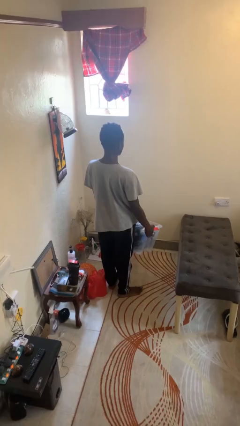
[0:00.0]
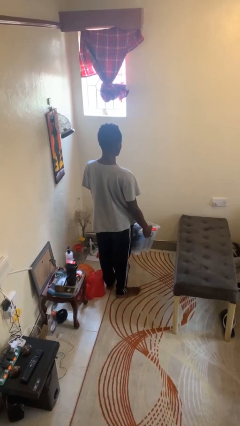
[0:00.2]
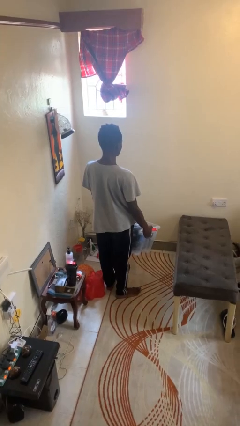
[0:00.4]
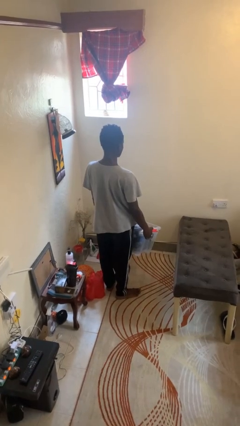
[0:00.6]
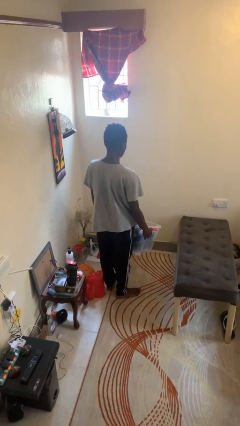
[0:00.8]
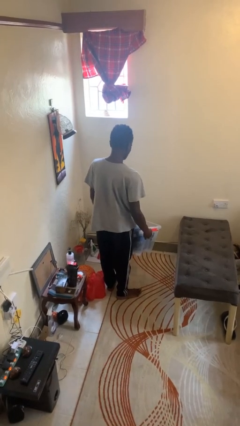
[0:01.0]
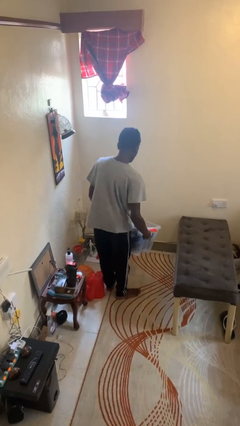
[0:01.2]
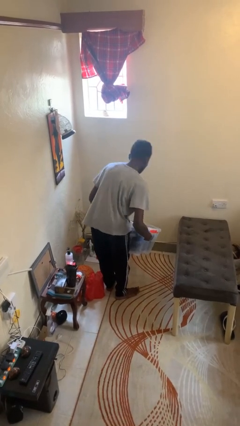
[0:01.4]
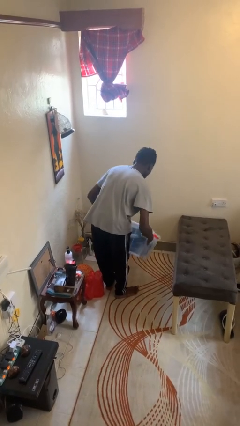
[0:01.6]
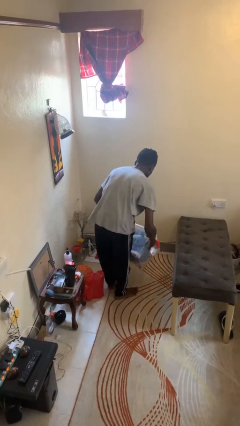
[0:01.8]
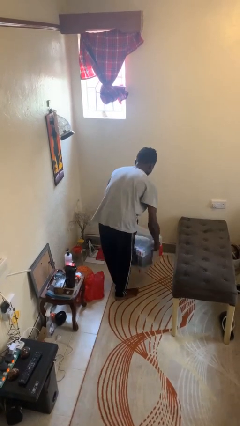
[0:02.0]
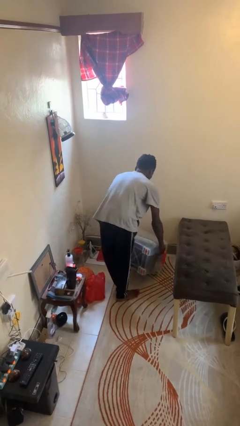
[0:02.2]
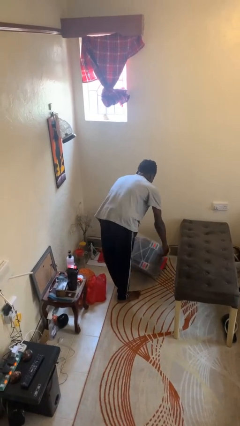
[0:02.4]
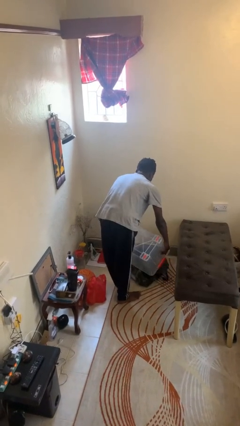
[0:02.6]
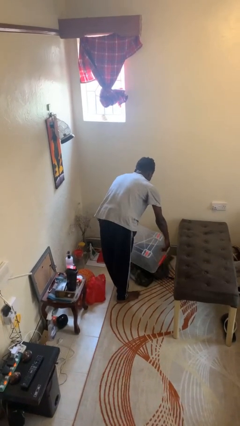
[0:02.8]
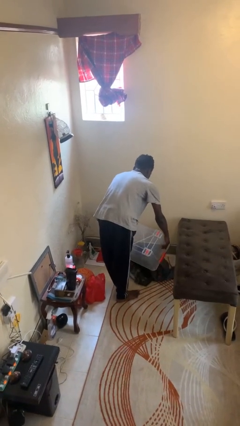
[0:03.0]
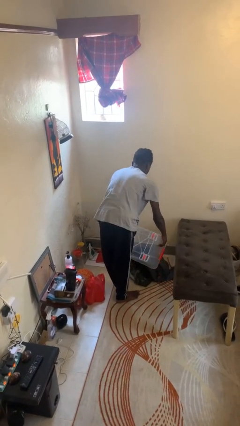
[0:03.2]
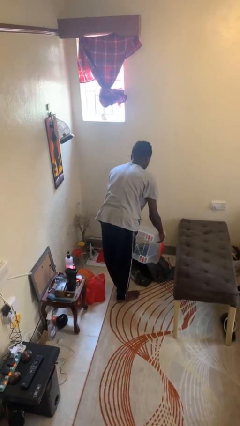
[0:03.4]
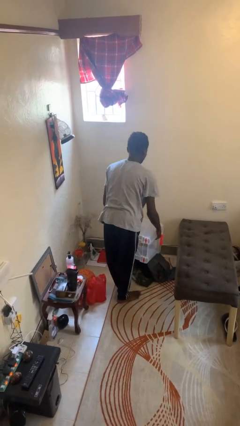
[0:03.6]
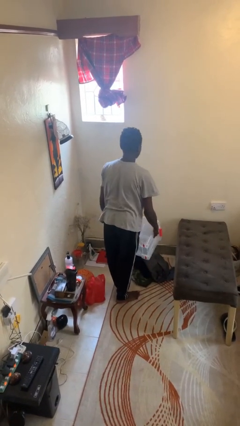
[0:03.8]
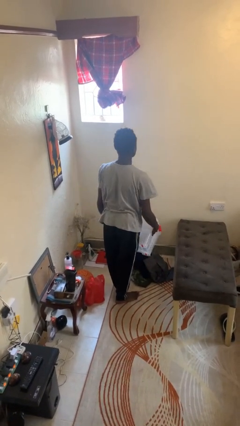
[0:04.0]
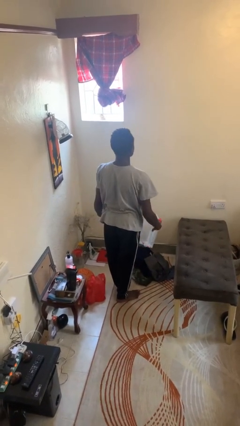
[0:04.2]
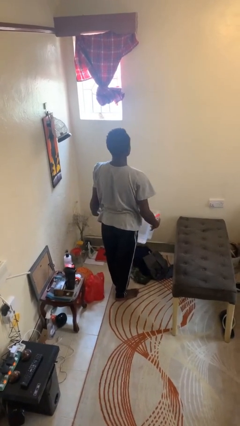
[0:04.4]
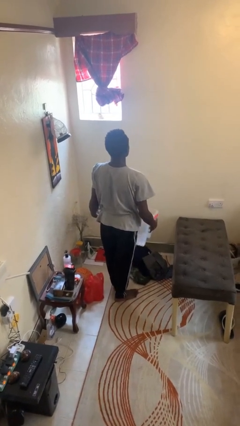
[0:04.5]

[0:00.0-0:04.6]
person unloads box onto floor

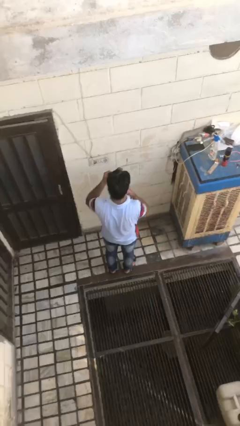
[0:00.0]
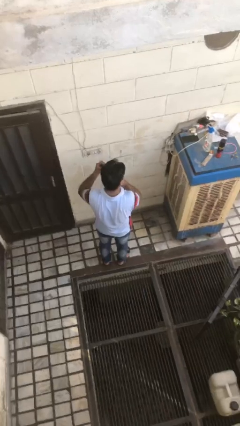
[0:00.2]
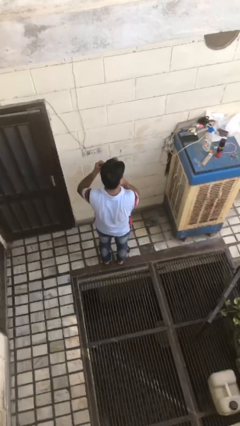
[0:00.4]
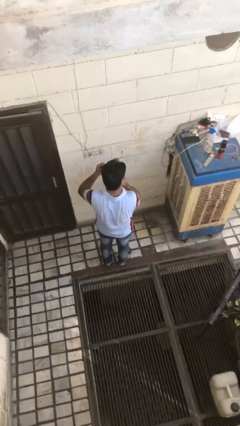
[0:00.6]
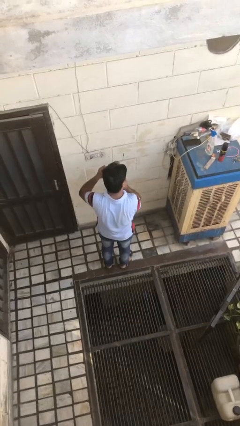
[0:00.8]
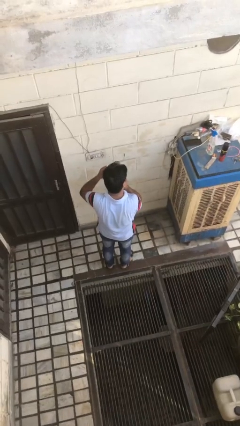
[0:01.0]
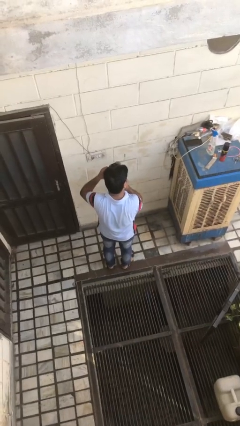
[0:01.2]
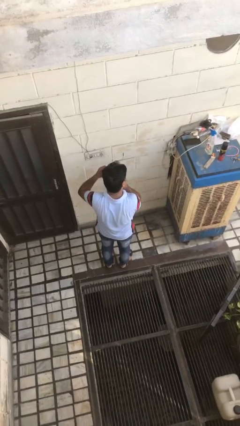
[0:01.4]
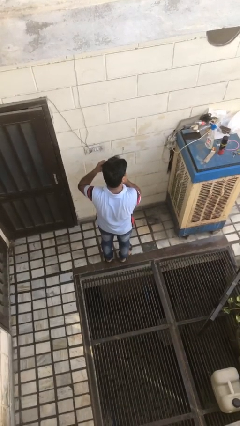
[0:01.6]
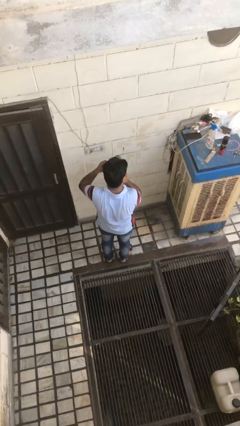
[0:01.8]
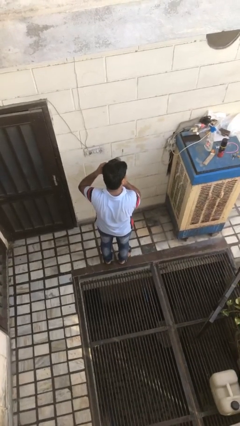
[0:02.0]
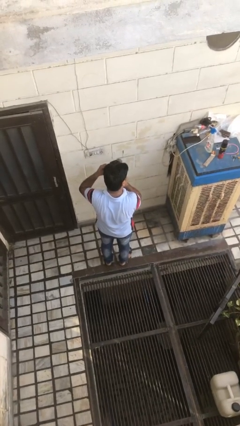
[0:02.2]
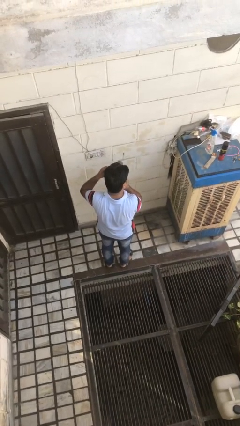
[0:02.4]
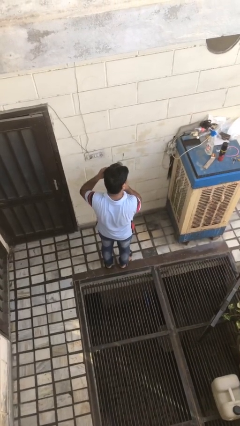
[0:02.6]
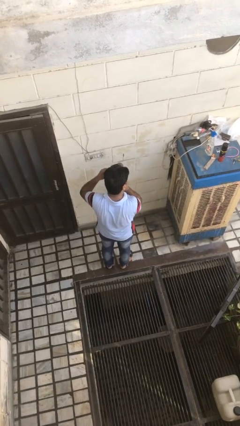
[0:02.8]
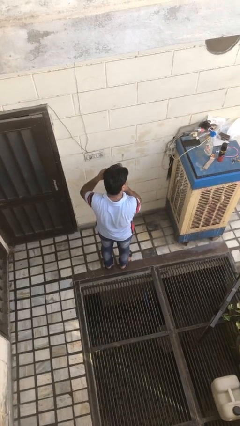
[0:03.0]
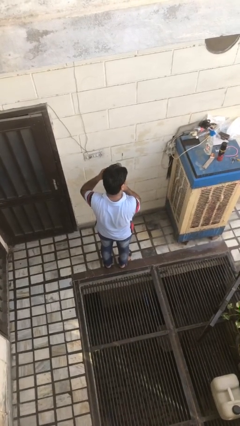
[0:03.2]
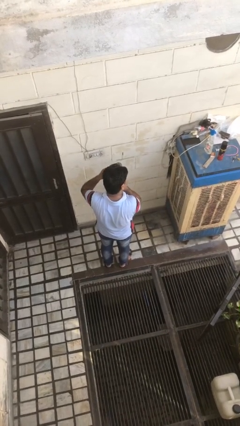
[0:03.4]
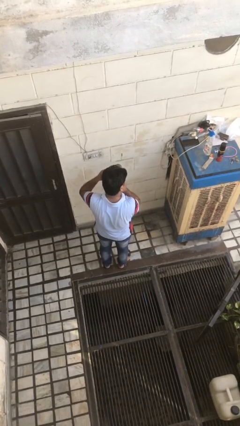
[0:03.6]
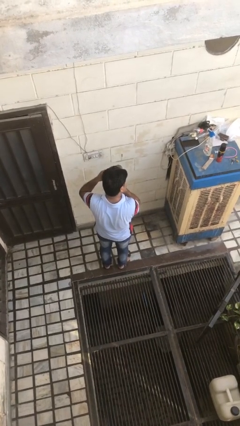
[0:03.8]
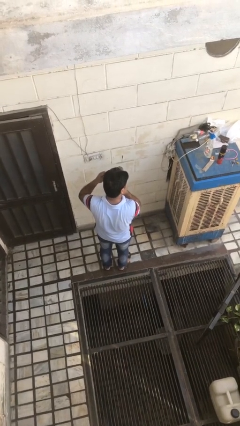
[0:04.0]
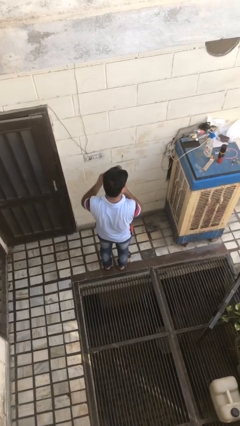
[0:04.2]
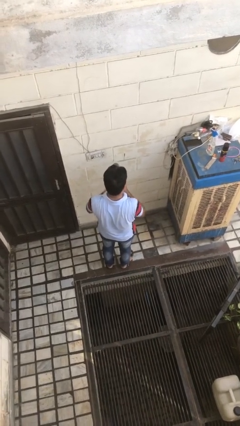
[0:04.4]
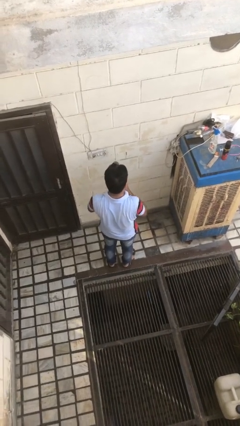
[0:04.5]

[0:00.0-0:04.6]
person applies eye makeup

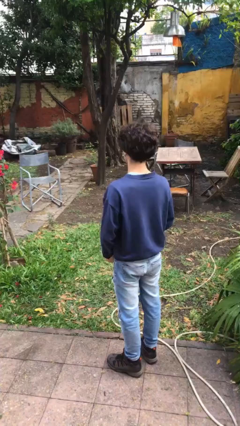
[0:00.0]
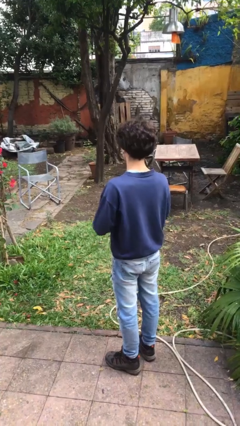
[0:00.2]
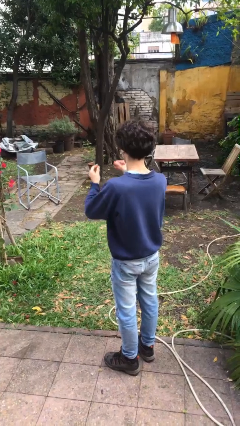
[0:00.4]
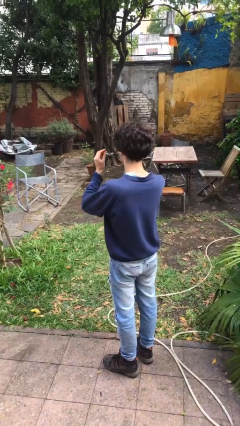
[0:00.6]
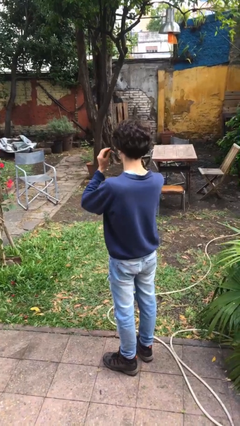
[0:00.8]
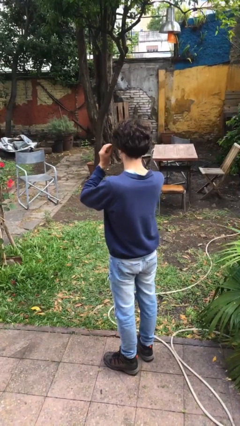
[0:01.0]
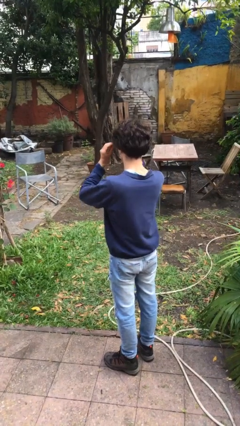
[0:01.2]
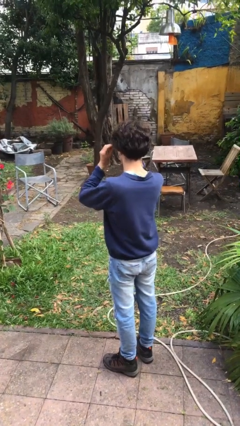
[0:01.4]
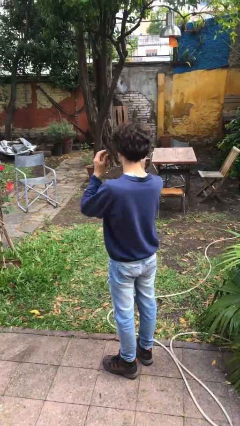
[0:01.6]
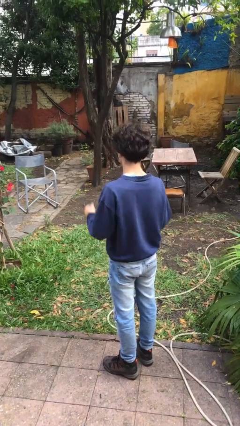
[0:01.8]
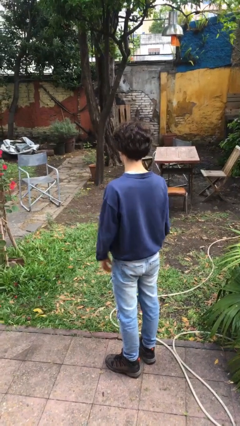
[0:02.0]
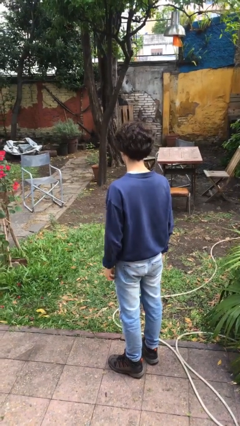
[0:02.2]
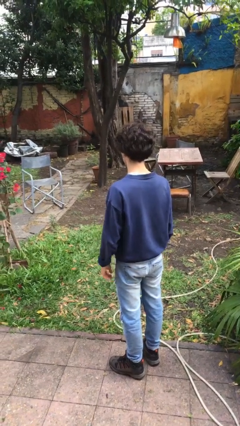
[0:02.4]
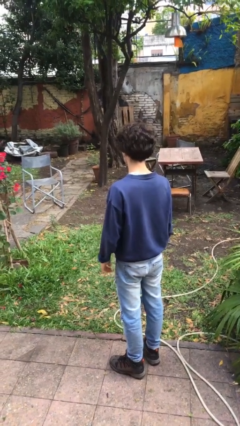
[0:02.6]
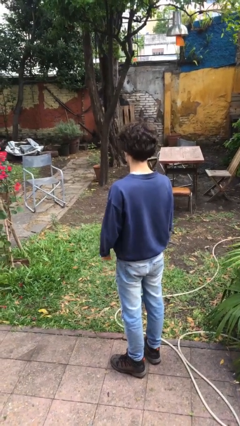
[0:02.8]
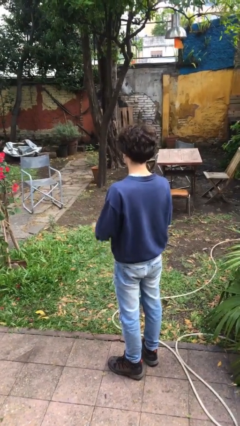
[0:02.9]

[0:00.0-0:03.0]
person puts on glasses

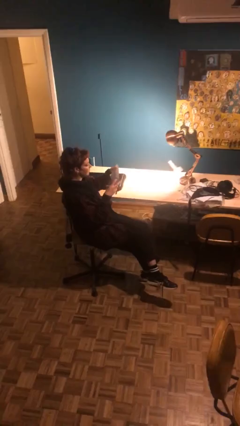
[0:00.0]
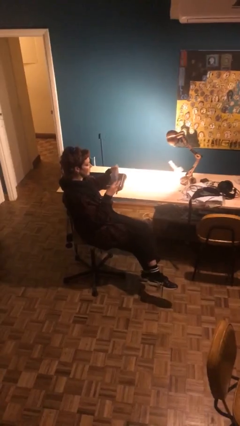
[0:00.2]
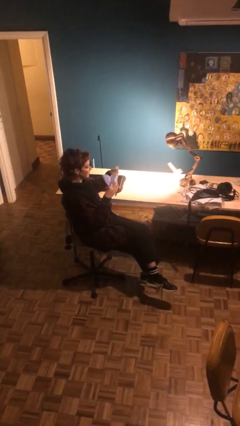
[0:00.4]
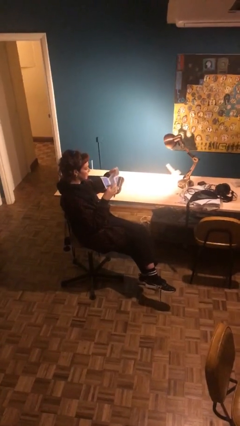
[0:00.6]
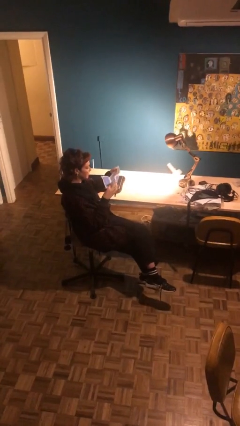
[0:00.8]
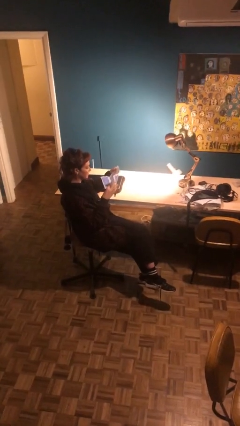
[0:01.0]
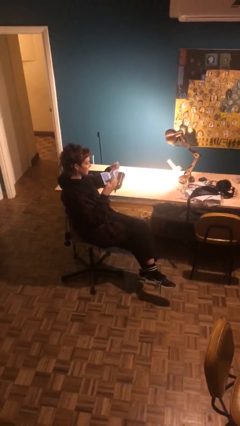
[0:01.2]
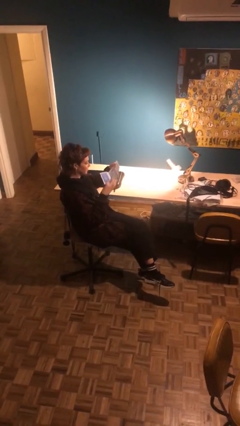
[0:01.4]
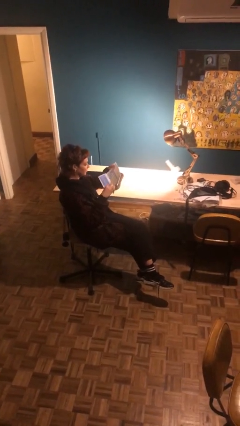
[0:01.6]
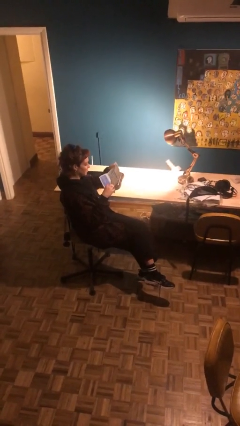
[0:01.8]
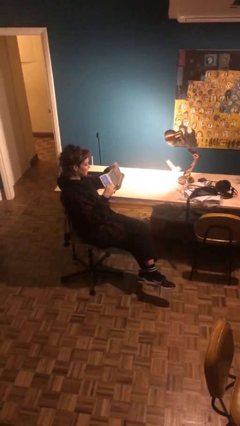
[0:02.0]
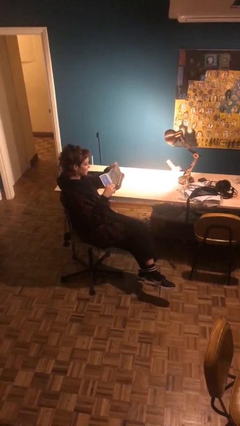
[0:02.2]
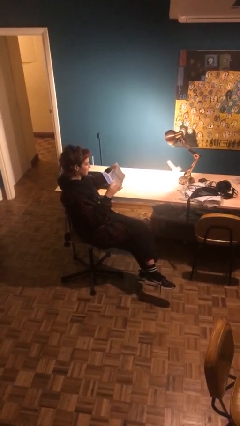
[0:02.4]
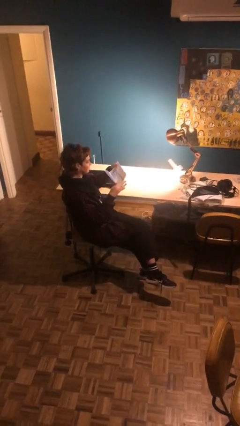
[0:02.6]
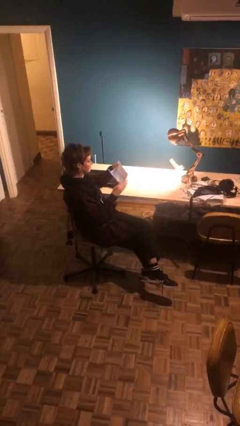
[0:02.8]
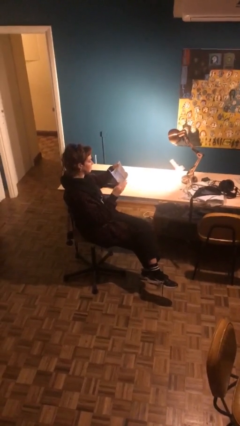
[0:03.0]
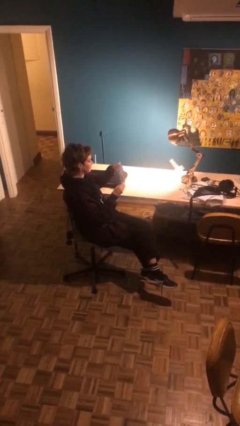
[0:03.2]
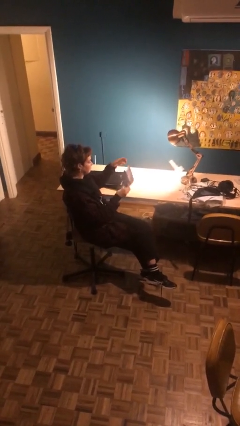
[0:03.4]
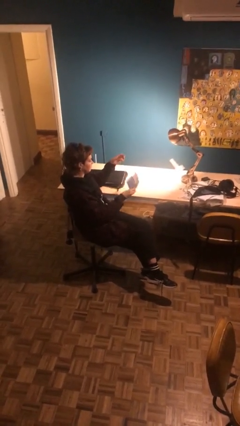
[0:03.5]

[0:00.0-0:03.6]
person reads document

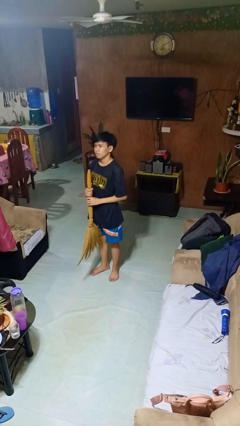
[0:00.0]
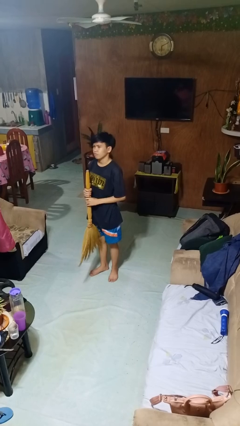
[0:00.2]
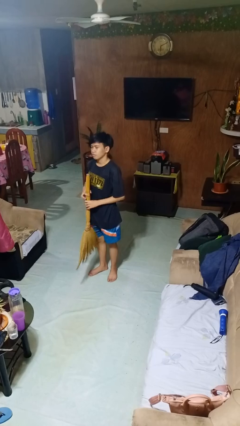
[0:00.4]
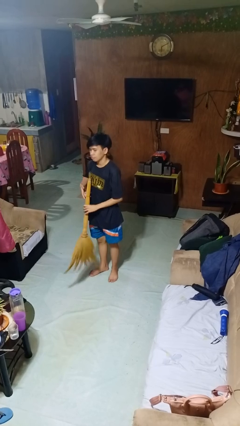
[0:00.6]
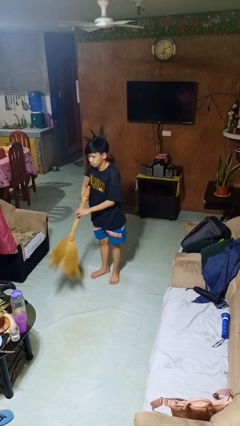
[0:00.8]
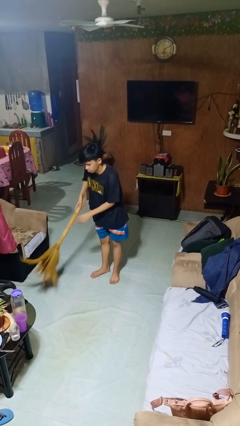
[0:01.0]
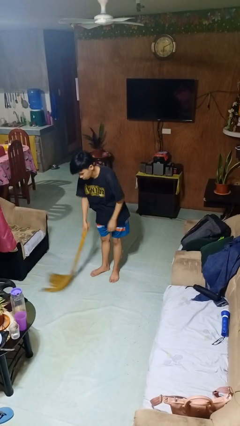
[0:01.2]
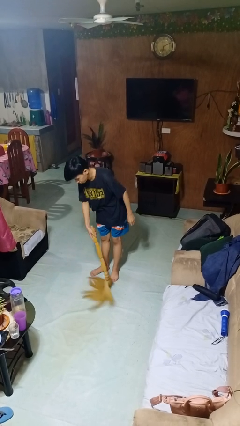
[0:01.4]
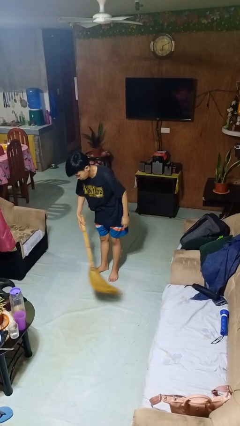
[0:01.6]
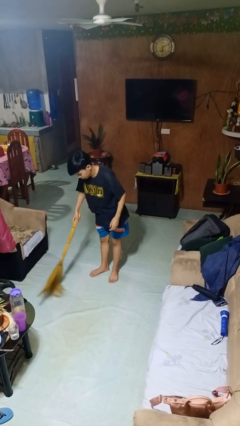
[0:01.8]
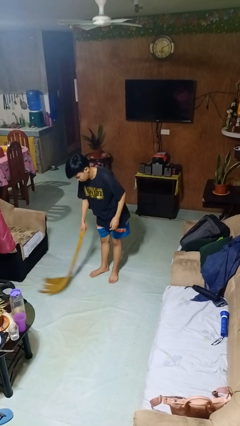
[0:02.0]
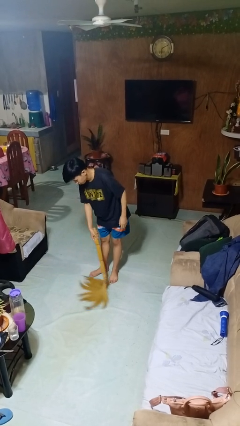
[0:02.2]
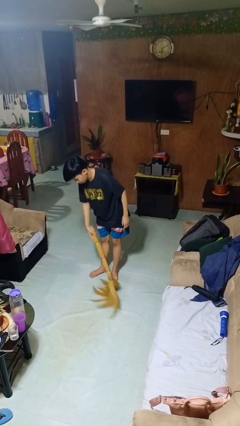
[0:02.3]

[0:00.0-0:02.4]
person sweeps floor
